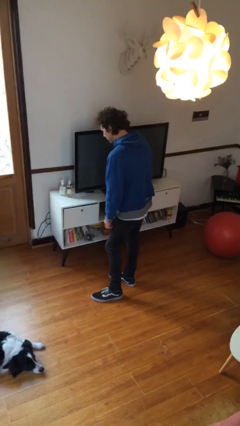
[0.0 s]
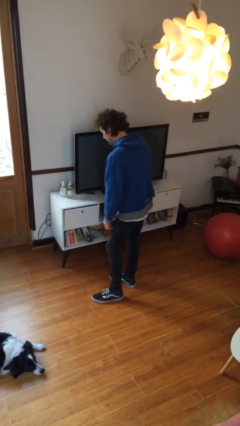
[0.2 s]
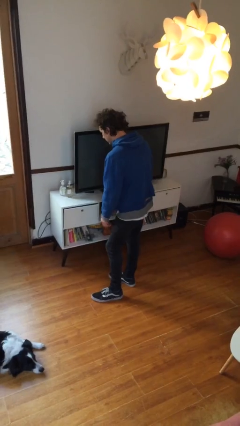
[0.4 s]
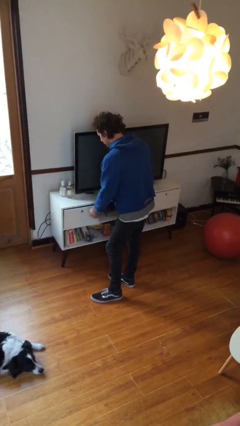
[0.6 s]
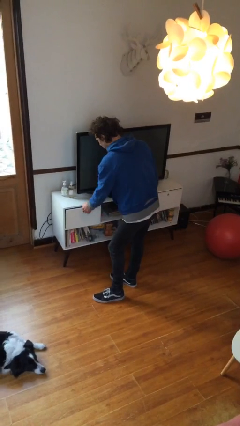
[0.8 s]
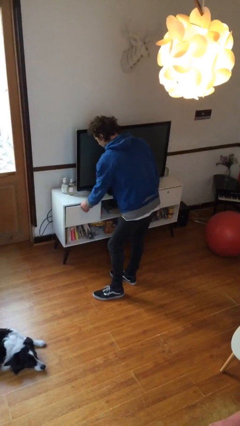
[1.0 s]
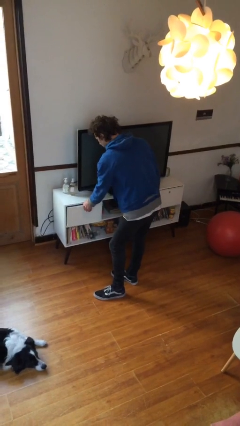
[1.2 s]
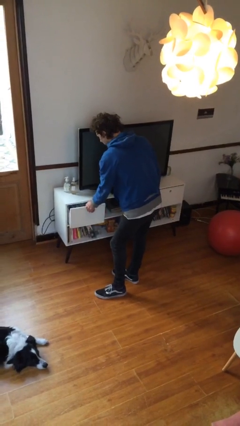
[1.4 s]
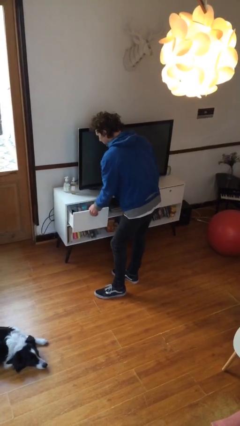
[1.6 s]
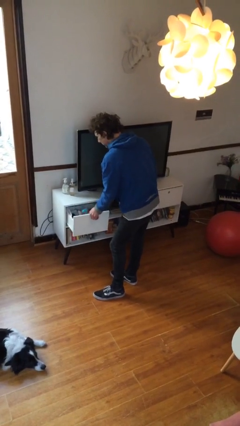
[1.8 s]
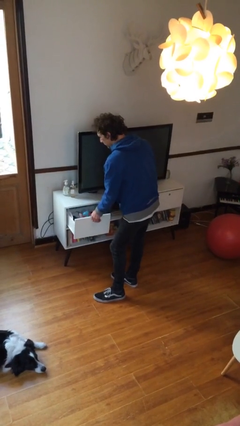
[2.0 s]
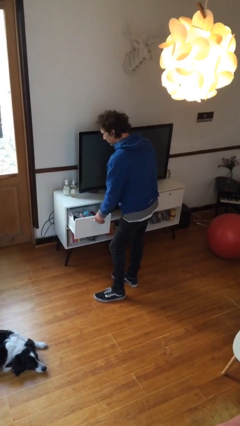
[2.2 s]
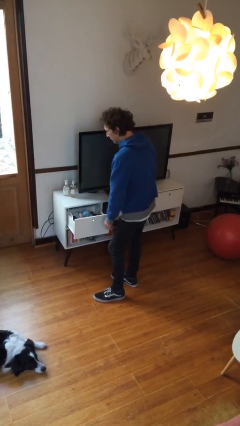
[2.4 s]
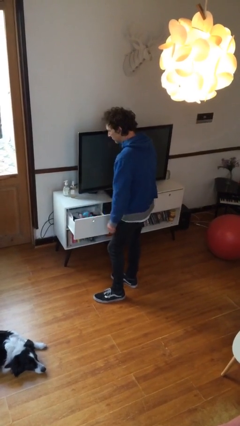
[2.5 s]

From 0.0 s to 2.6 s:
person opens dresser drawer

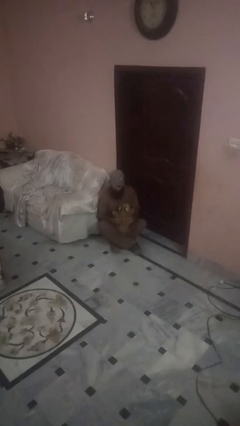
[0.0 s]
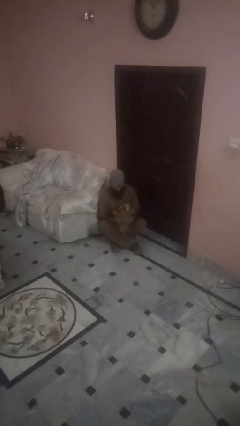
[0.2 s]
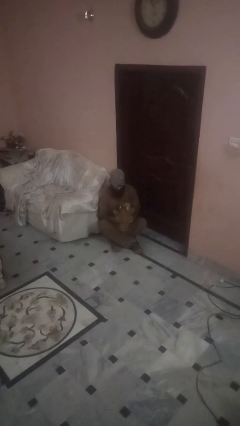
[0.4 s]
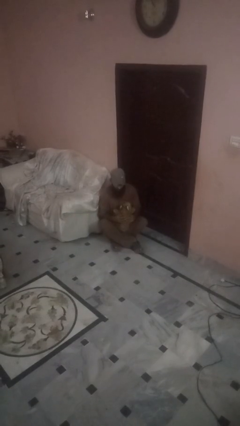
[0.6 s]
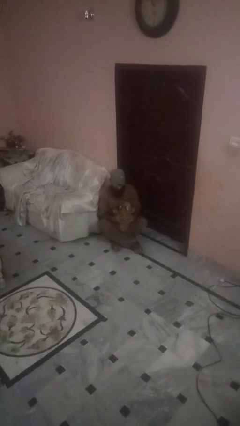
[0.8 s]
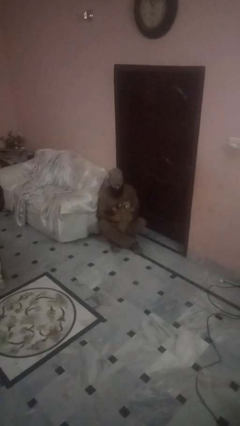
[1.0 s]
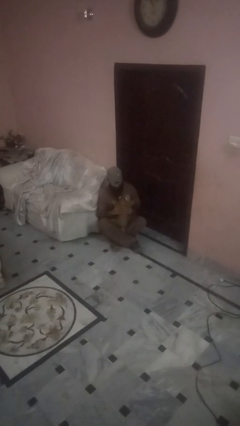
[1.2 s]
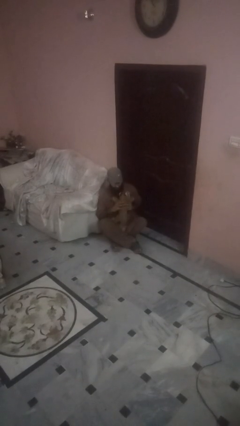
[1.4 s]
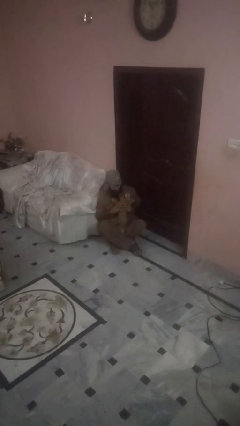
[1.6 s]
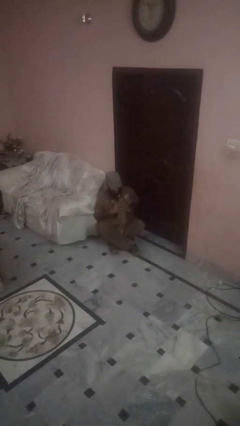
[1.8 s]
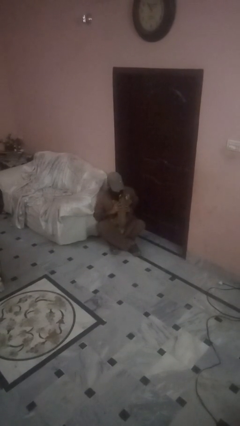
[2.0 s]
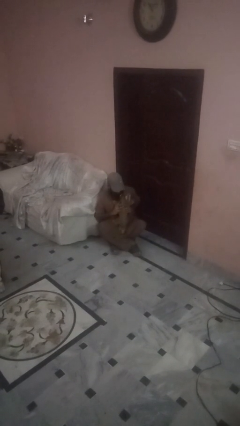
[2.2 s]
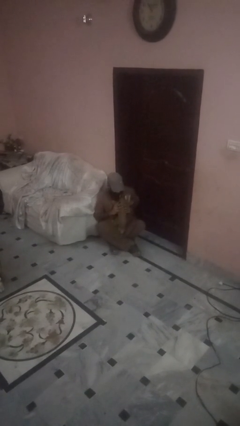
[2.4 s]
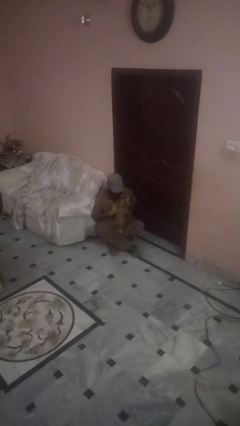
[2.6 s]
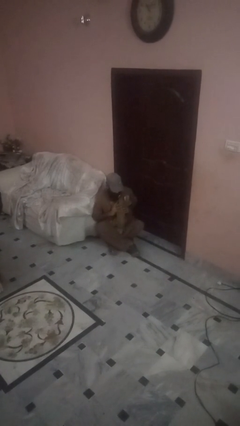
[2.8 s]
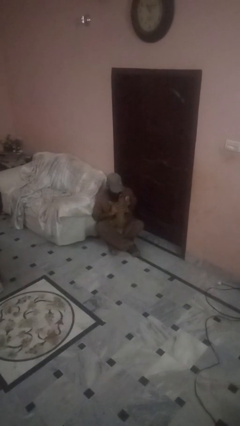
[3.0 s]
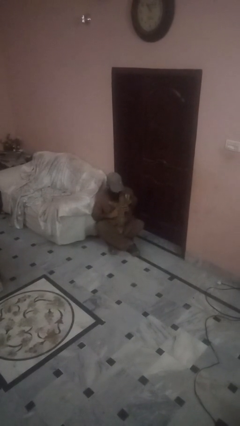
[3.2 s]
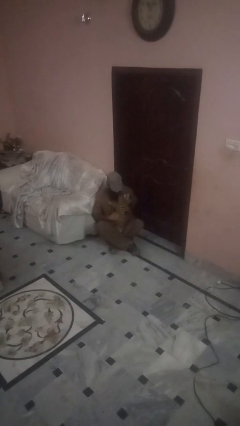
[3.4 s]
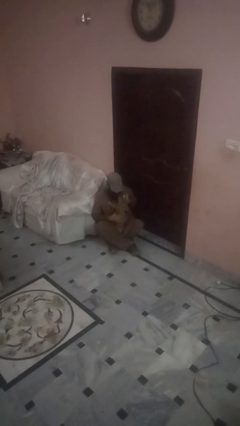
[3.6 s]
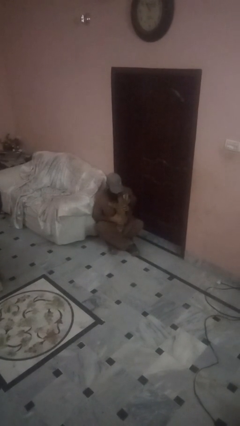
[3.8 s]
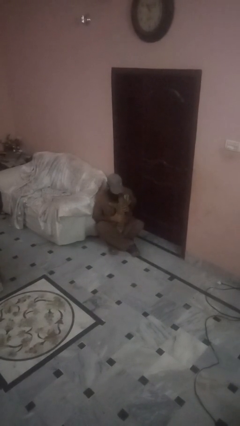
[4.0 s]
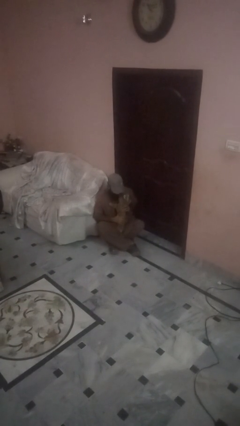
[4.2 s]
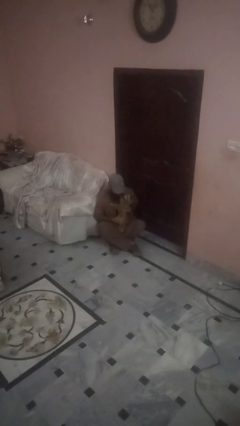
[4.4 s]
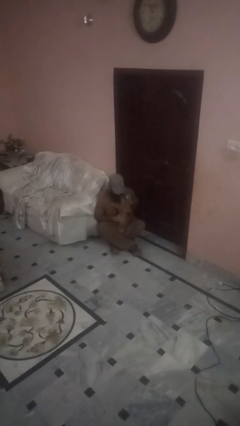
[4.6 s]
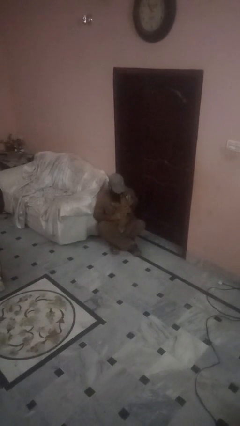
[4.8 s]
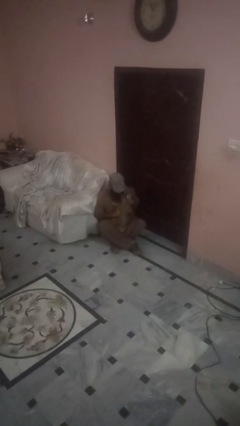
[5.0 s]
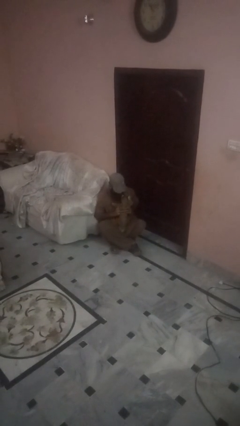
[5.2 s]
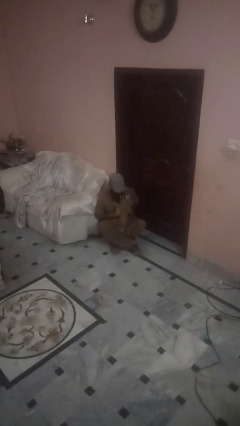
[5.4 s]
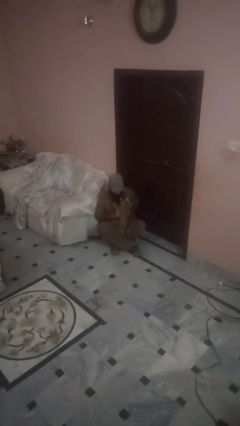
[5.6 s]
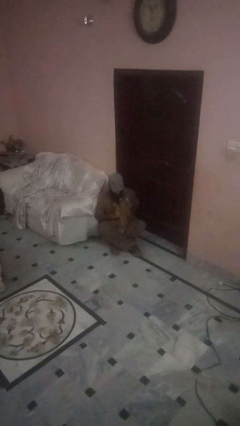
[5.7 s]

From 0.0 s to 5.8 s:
person hugs dog

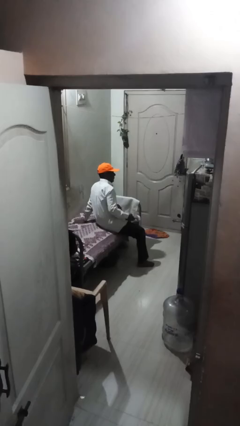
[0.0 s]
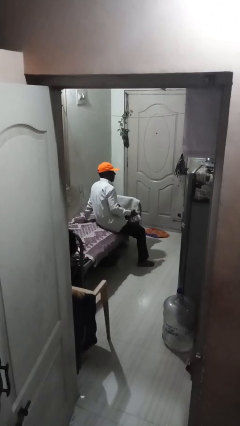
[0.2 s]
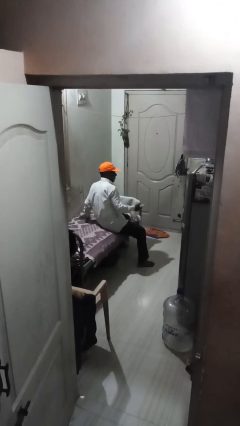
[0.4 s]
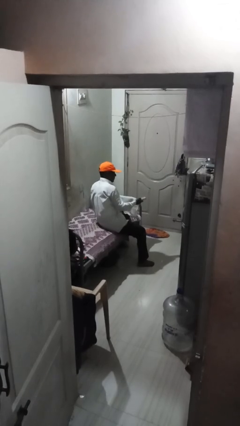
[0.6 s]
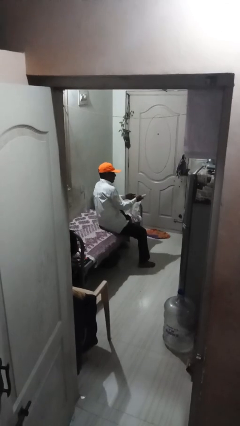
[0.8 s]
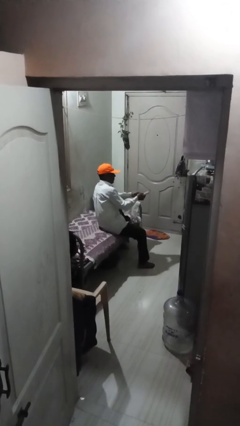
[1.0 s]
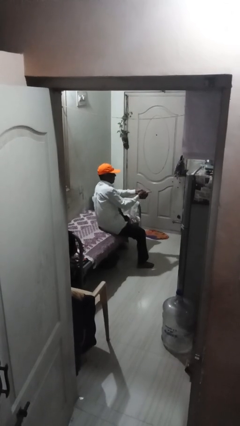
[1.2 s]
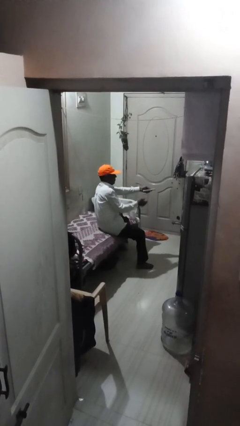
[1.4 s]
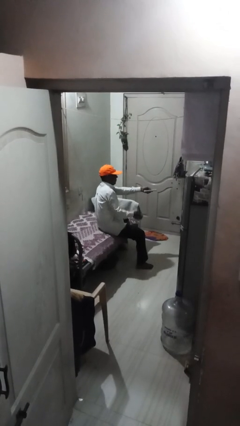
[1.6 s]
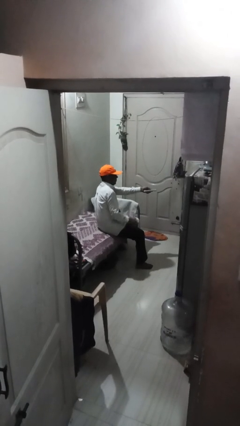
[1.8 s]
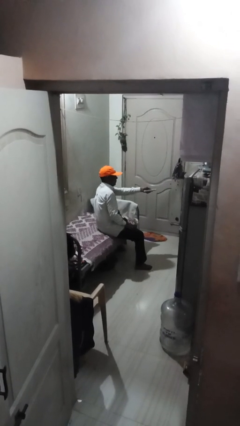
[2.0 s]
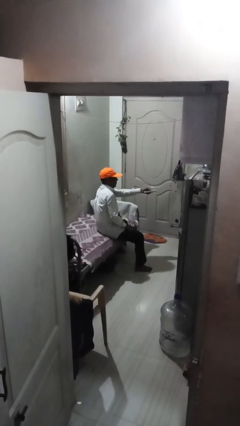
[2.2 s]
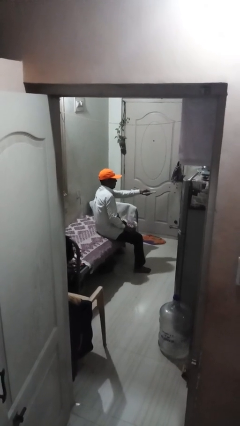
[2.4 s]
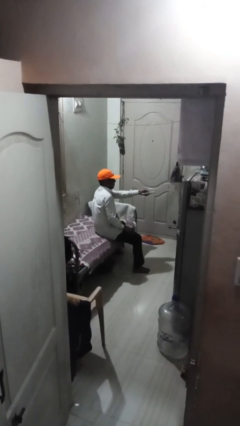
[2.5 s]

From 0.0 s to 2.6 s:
person uses television remote

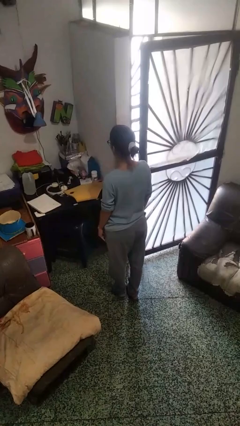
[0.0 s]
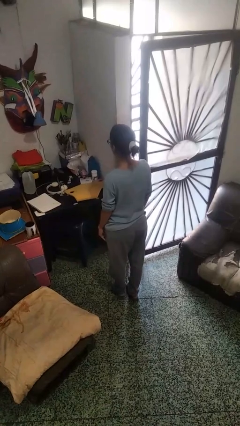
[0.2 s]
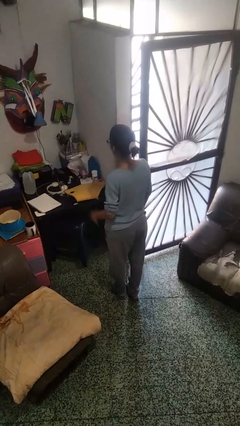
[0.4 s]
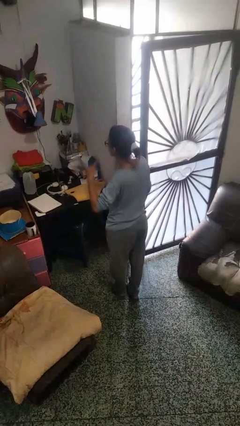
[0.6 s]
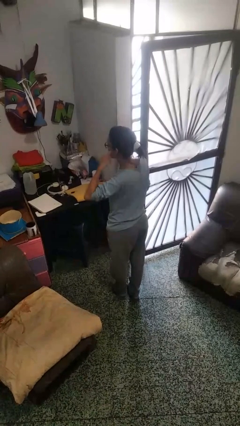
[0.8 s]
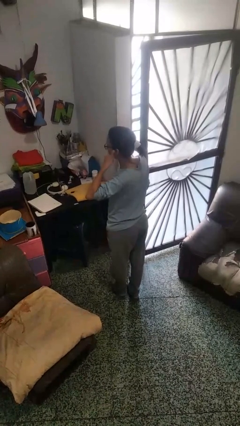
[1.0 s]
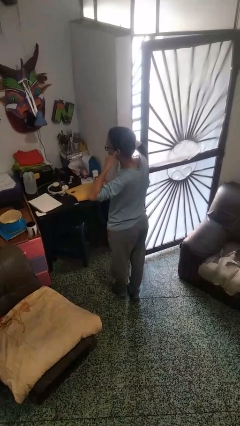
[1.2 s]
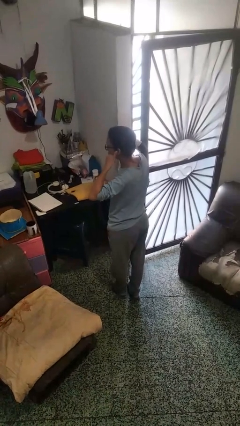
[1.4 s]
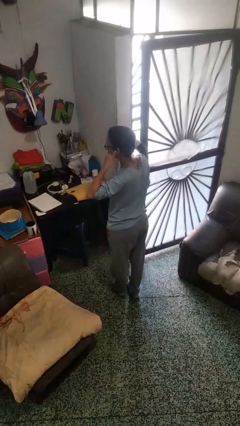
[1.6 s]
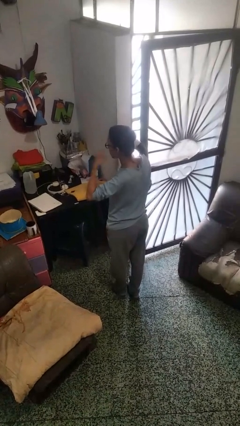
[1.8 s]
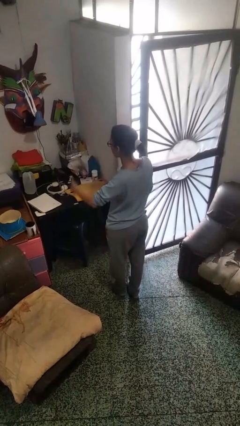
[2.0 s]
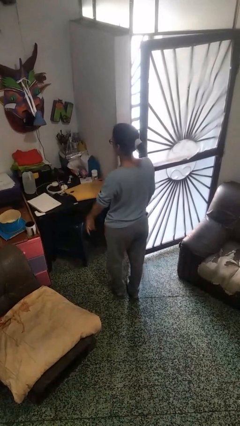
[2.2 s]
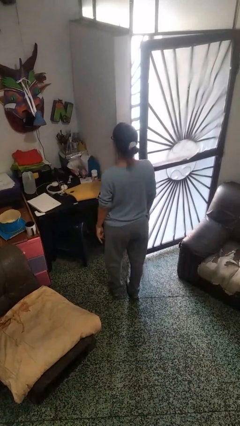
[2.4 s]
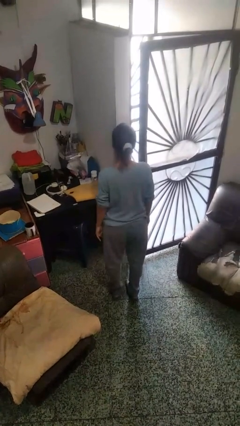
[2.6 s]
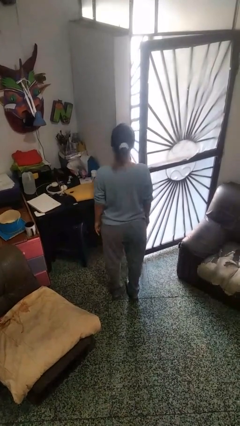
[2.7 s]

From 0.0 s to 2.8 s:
person gestures call me

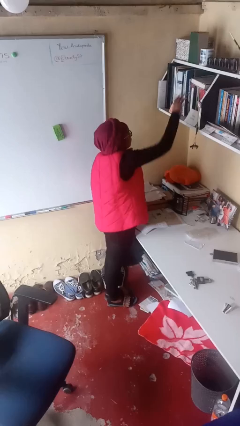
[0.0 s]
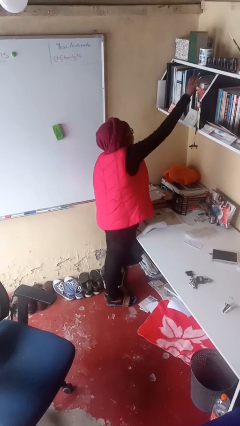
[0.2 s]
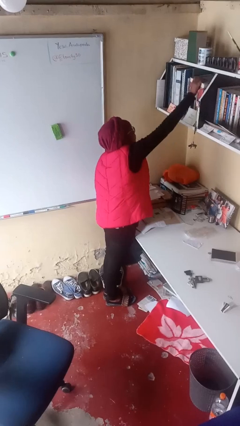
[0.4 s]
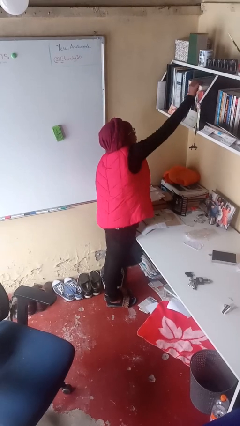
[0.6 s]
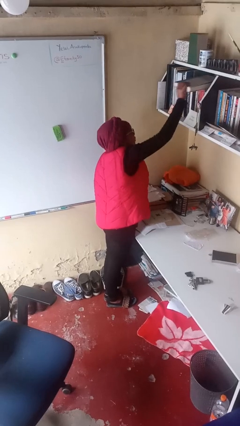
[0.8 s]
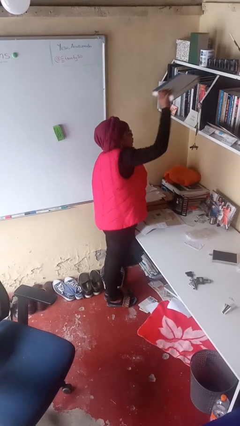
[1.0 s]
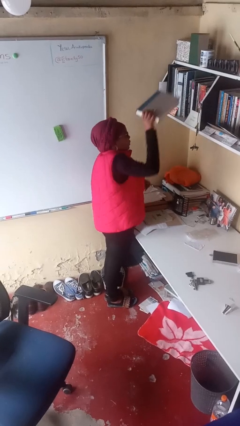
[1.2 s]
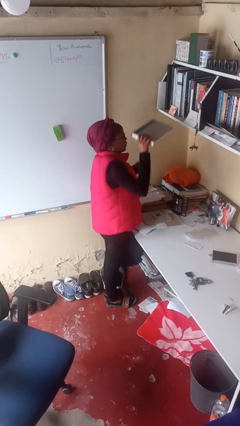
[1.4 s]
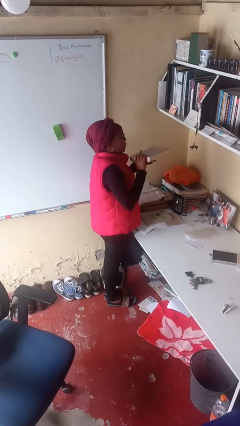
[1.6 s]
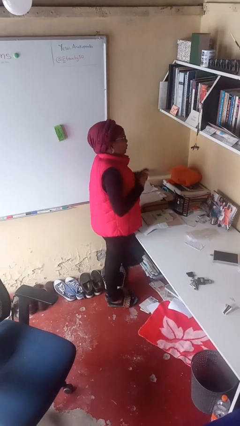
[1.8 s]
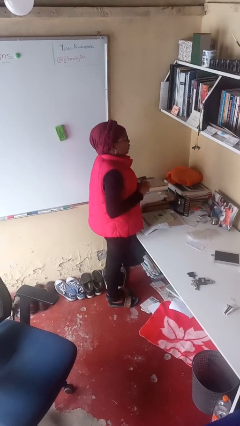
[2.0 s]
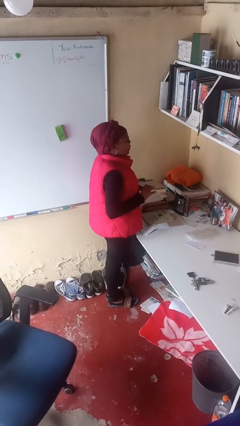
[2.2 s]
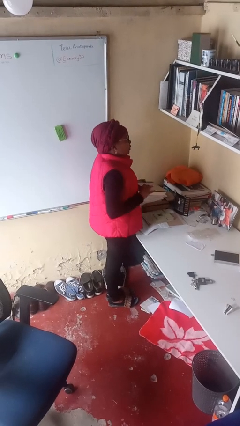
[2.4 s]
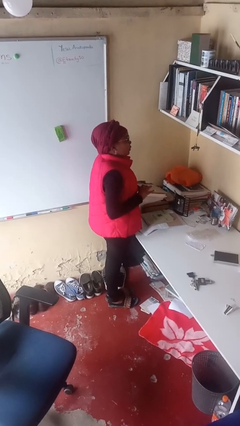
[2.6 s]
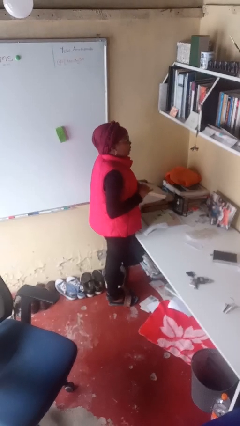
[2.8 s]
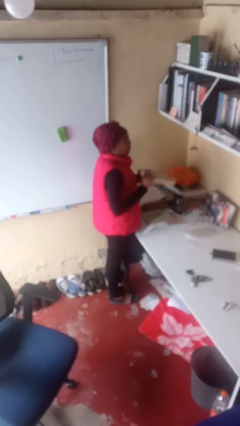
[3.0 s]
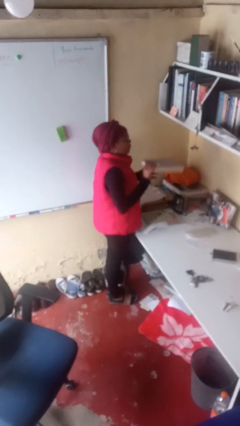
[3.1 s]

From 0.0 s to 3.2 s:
person picks up object from shelf

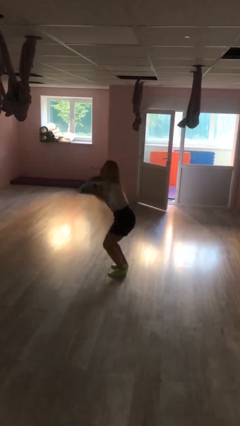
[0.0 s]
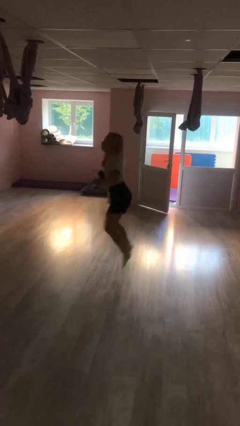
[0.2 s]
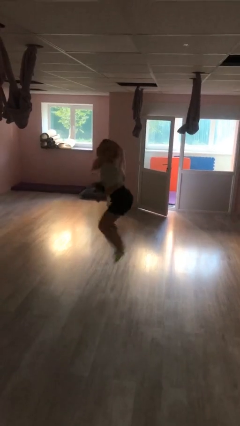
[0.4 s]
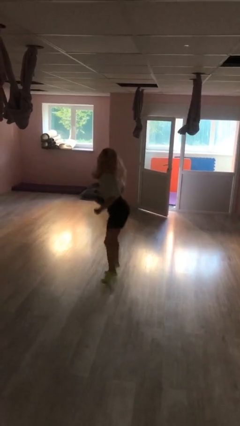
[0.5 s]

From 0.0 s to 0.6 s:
person jumps
